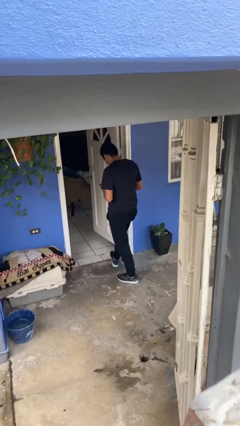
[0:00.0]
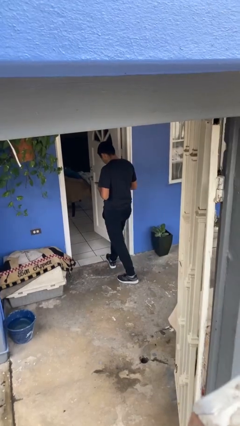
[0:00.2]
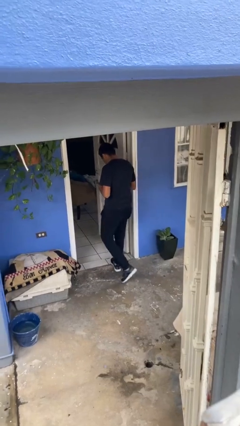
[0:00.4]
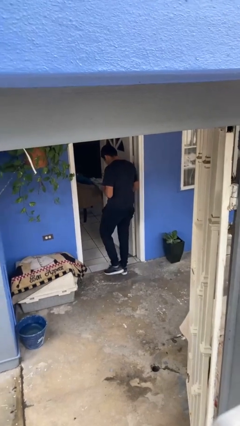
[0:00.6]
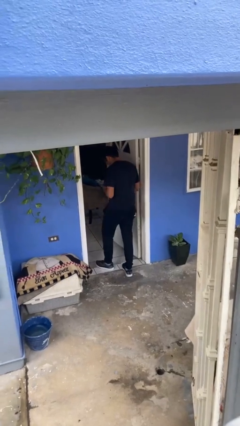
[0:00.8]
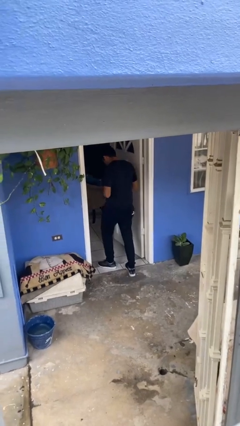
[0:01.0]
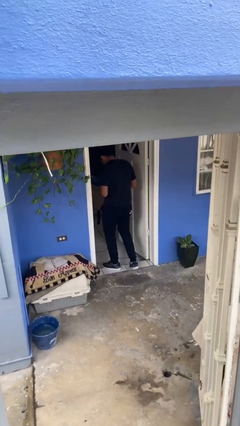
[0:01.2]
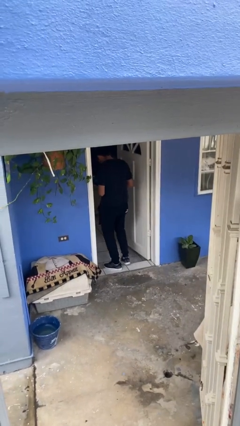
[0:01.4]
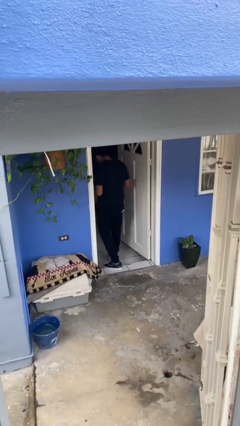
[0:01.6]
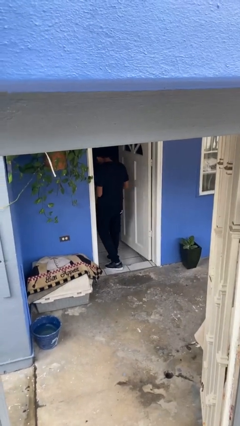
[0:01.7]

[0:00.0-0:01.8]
person exits scene through structure

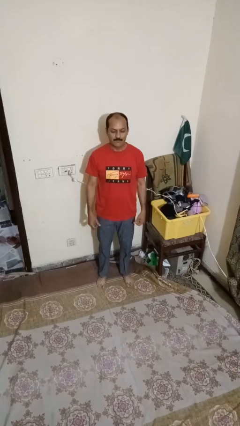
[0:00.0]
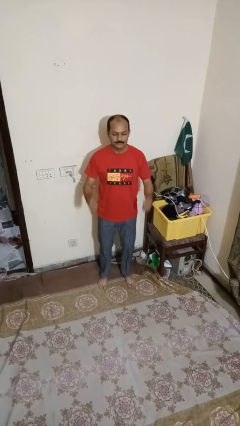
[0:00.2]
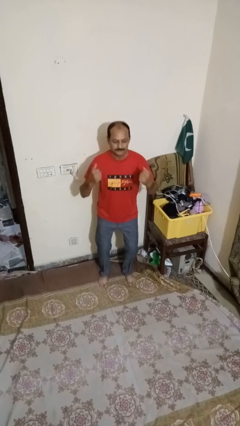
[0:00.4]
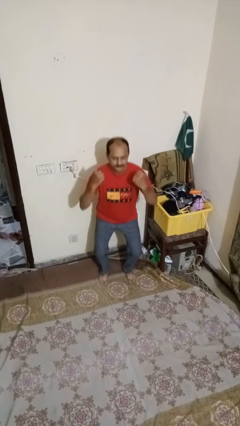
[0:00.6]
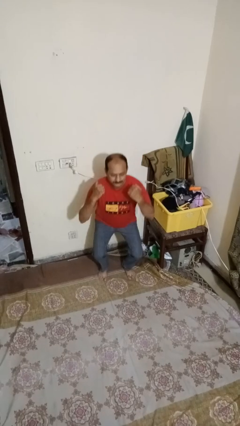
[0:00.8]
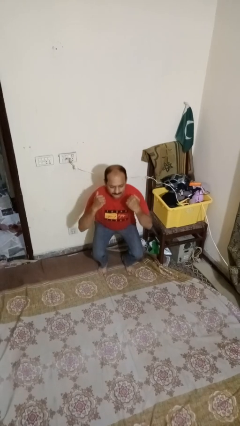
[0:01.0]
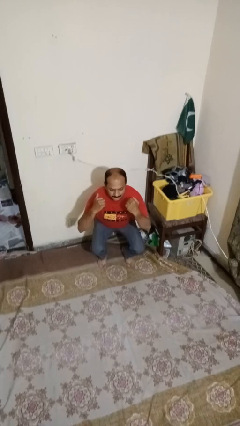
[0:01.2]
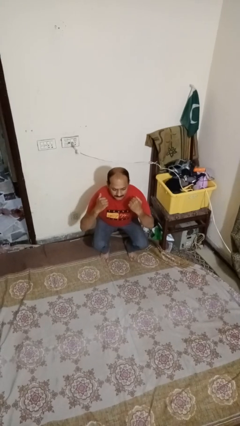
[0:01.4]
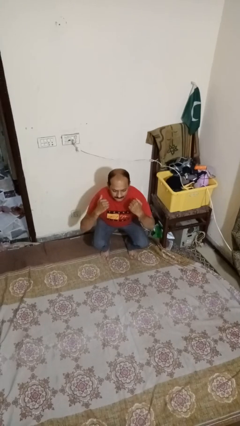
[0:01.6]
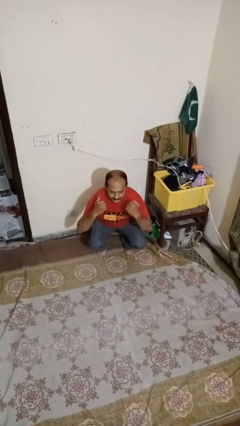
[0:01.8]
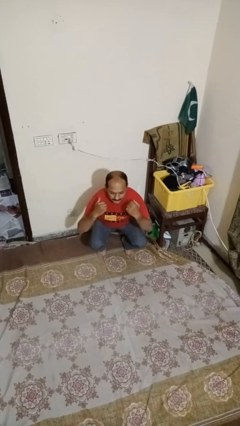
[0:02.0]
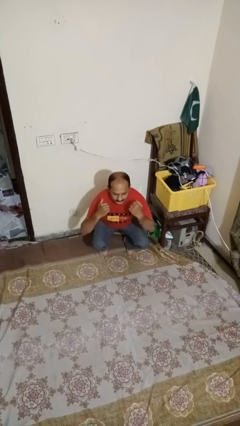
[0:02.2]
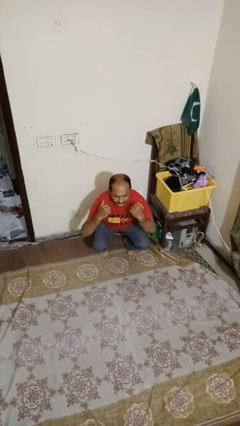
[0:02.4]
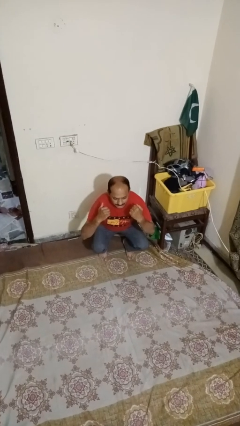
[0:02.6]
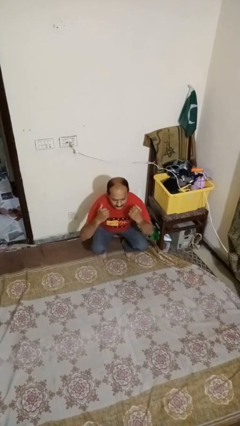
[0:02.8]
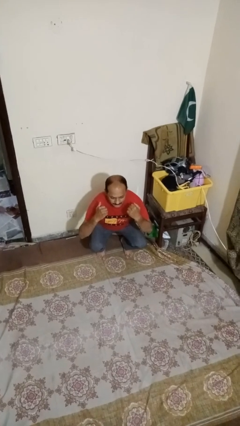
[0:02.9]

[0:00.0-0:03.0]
person squats

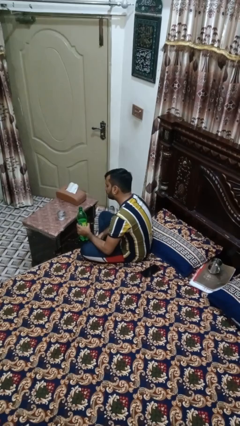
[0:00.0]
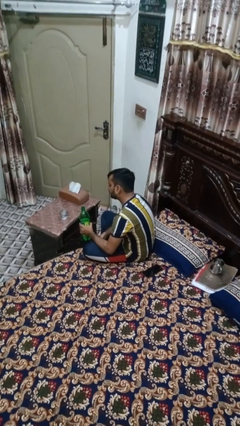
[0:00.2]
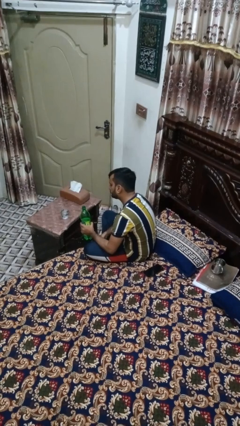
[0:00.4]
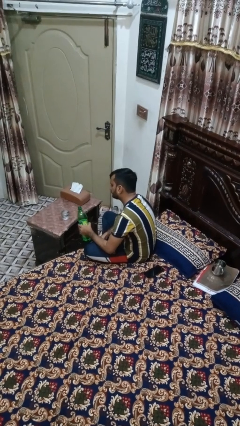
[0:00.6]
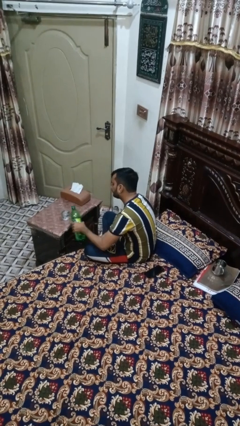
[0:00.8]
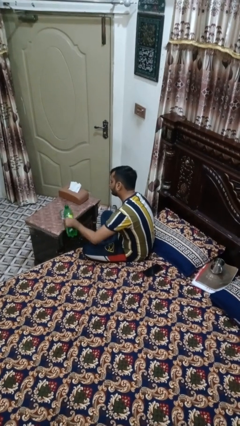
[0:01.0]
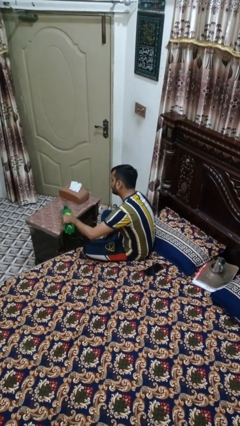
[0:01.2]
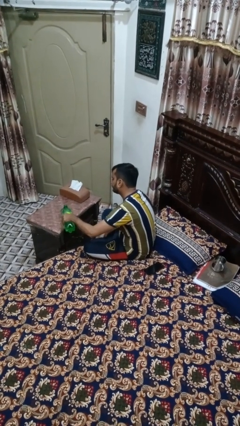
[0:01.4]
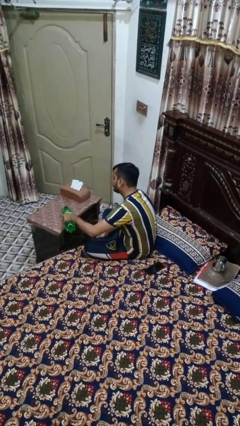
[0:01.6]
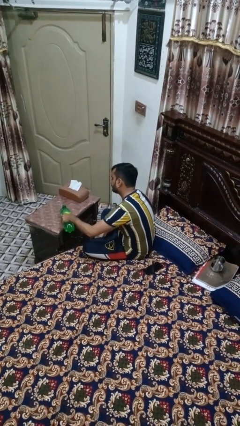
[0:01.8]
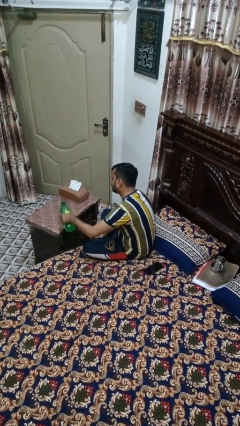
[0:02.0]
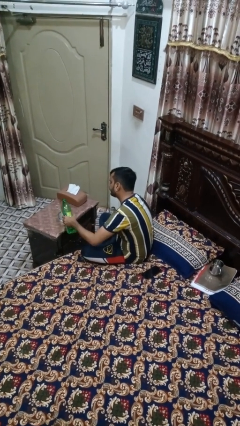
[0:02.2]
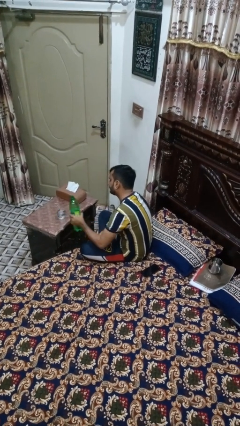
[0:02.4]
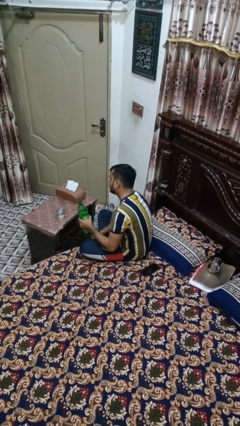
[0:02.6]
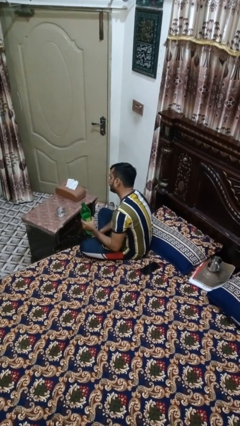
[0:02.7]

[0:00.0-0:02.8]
person pours liquid into cup

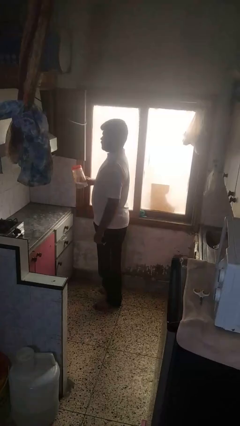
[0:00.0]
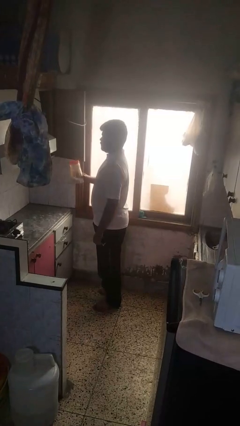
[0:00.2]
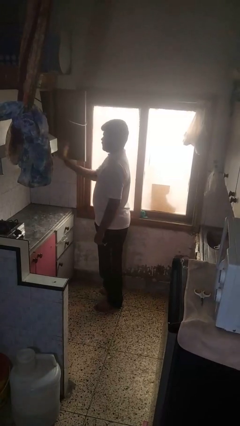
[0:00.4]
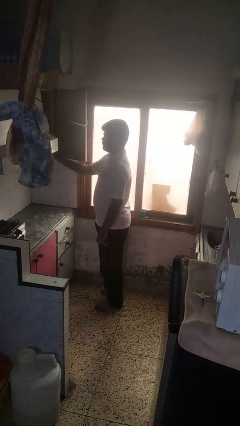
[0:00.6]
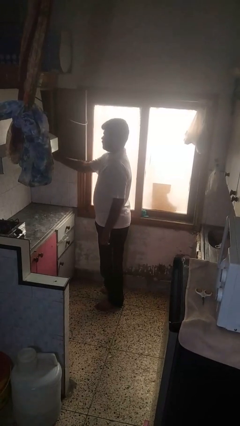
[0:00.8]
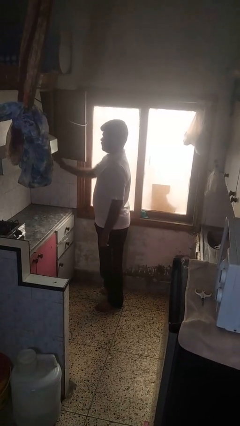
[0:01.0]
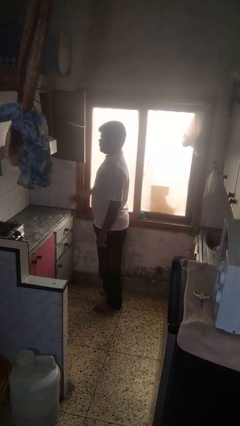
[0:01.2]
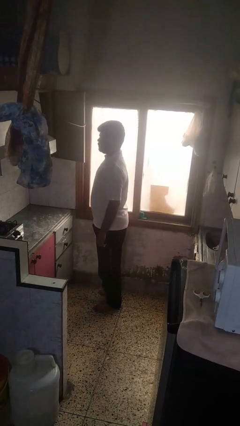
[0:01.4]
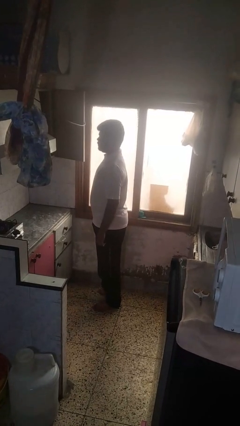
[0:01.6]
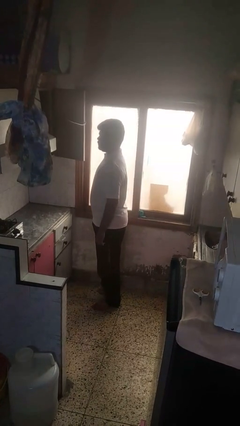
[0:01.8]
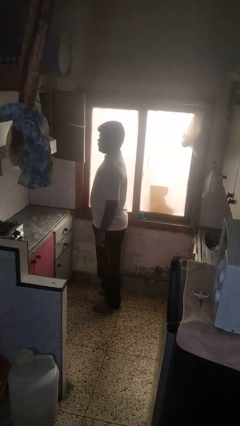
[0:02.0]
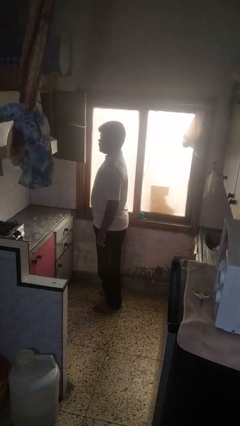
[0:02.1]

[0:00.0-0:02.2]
person puts down object into cabinet

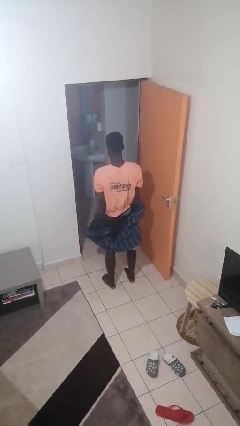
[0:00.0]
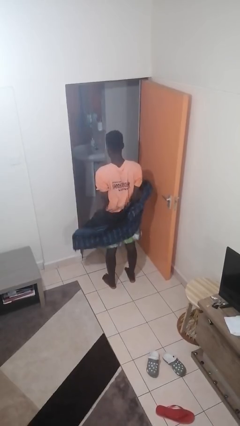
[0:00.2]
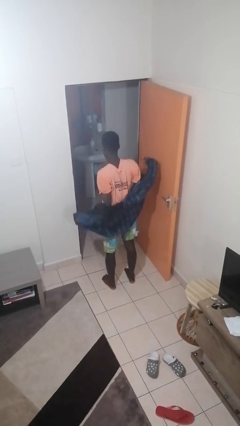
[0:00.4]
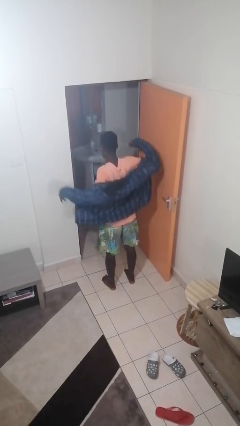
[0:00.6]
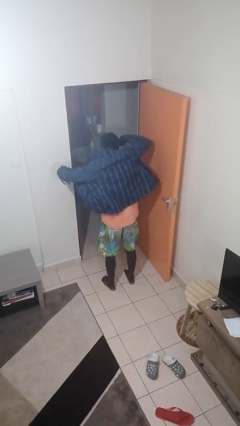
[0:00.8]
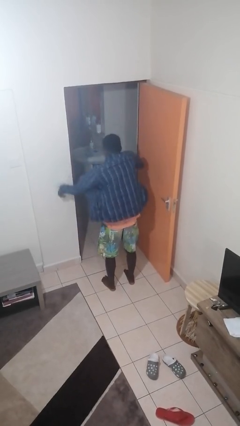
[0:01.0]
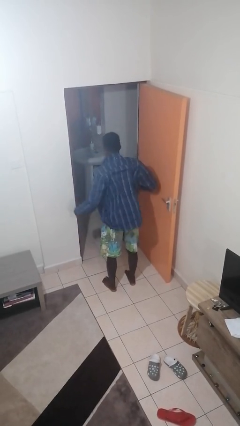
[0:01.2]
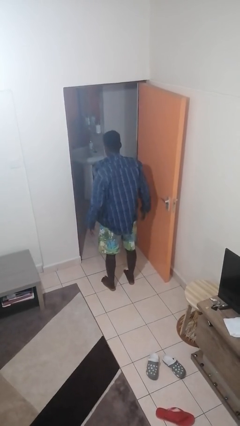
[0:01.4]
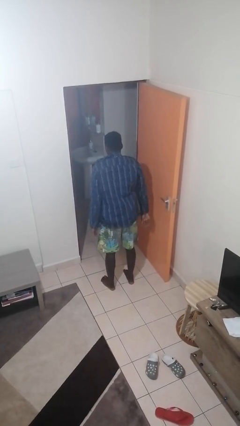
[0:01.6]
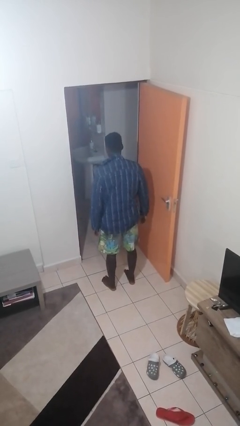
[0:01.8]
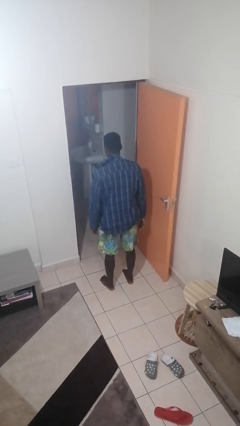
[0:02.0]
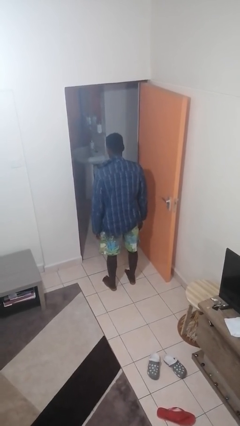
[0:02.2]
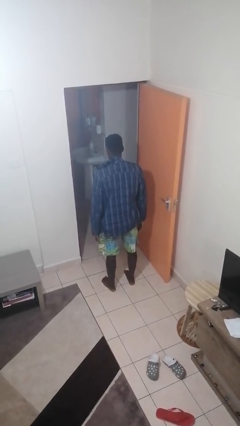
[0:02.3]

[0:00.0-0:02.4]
person puts on jacket

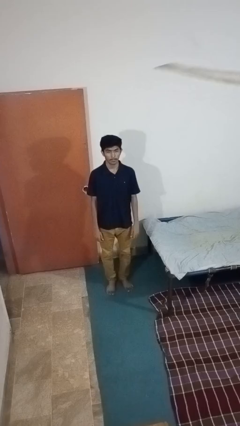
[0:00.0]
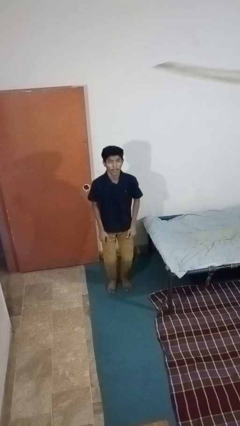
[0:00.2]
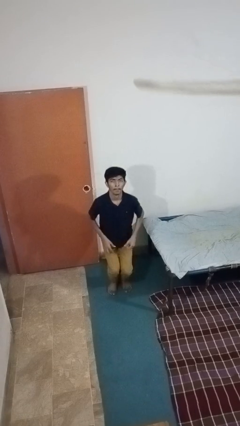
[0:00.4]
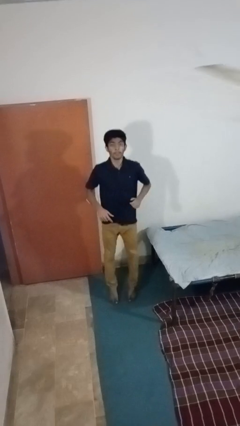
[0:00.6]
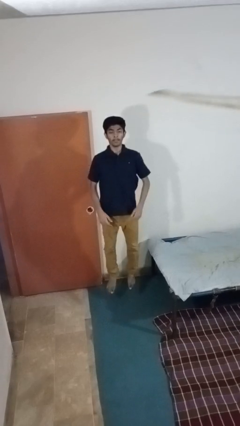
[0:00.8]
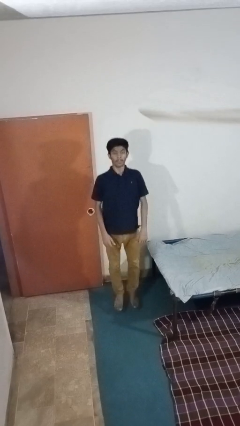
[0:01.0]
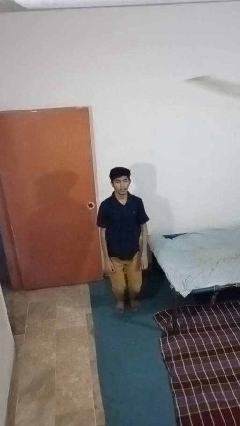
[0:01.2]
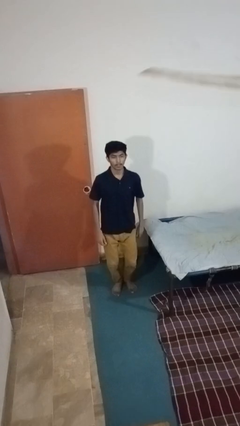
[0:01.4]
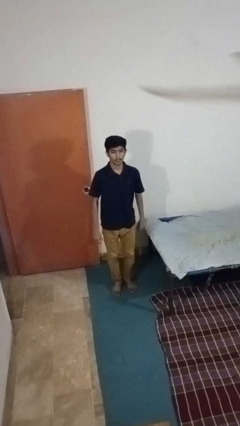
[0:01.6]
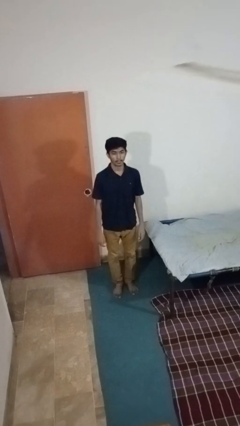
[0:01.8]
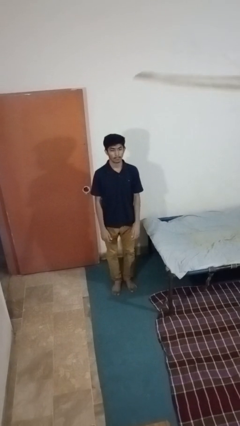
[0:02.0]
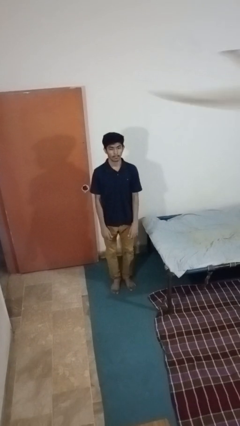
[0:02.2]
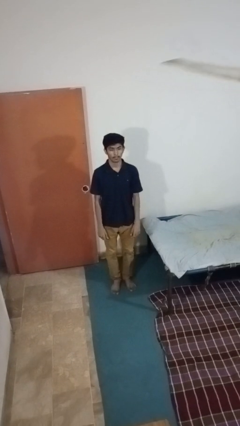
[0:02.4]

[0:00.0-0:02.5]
person jumps

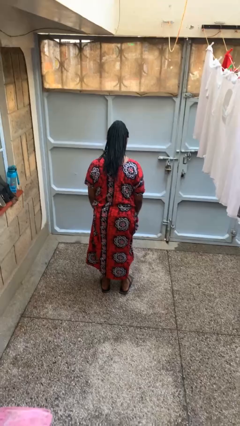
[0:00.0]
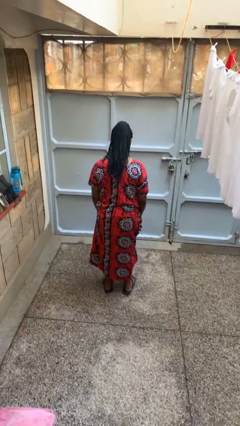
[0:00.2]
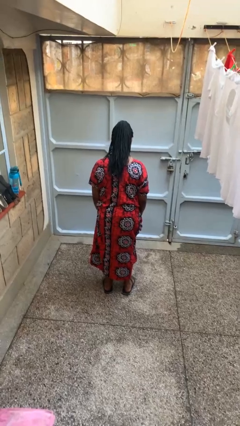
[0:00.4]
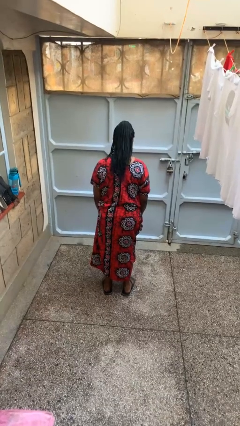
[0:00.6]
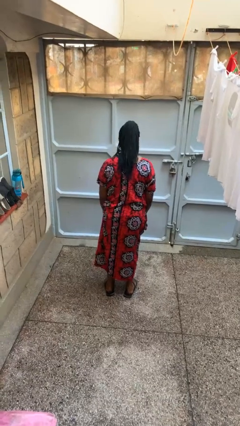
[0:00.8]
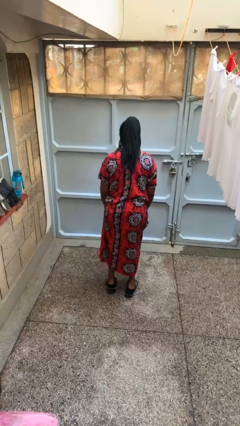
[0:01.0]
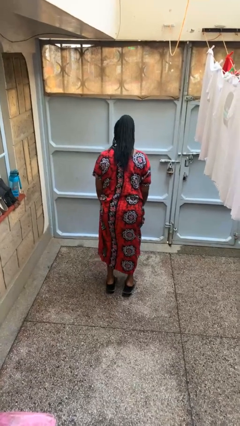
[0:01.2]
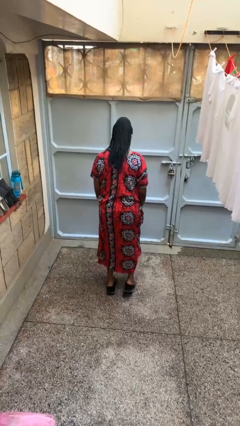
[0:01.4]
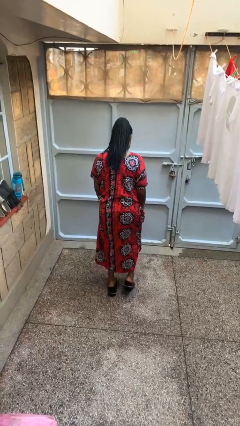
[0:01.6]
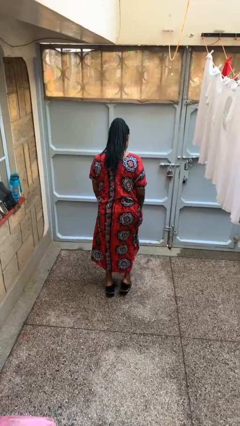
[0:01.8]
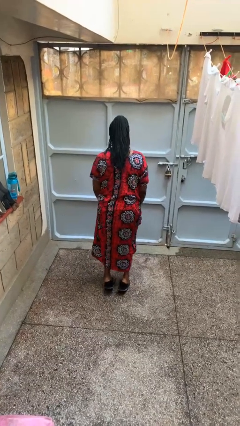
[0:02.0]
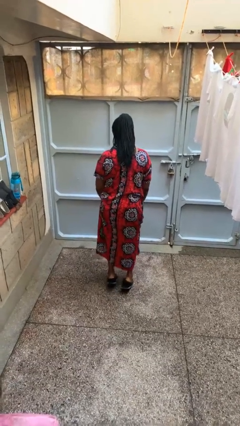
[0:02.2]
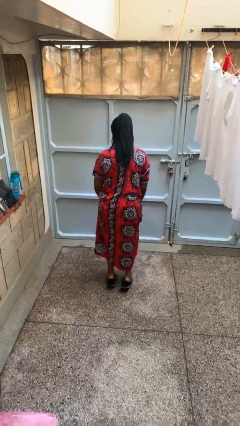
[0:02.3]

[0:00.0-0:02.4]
person walks tiptoe
